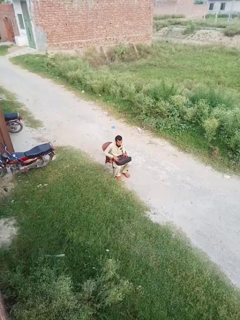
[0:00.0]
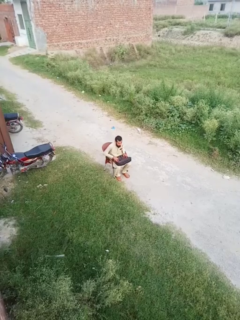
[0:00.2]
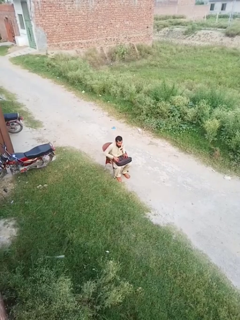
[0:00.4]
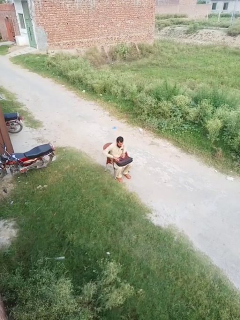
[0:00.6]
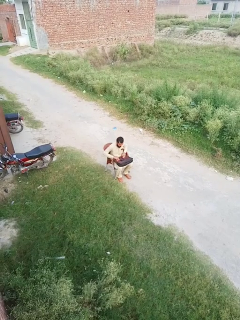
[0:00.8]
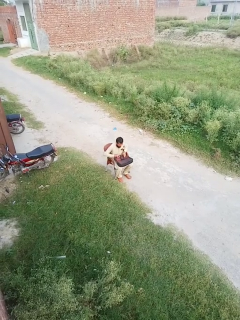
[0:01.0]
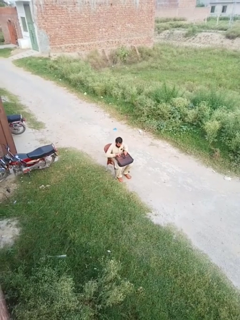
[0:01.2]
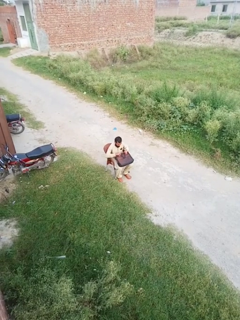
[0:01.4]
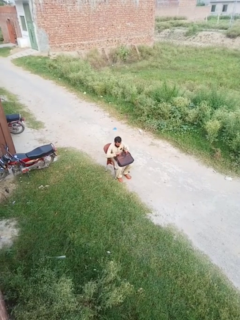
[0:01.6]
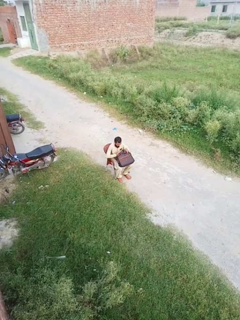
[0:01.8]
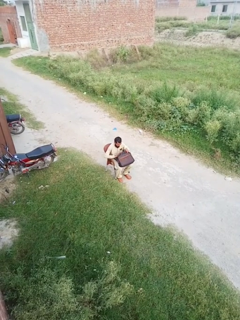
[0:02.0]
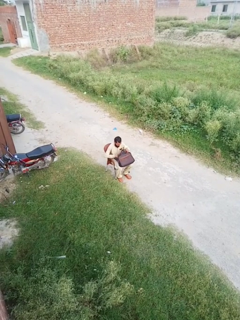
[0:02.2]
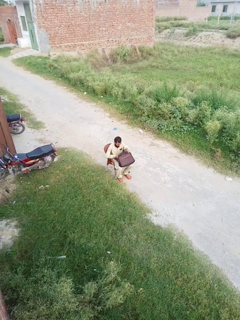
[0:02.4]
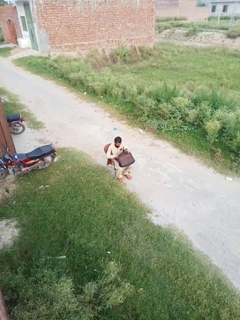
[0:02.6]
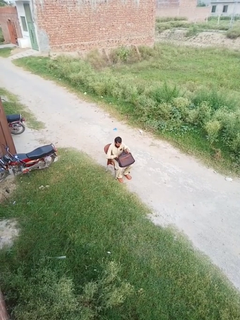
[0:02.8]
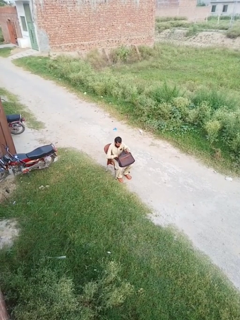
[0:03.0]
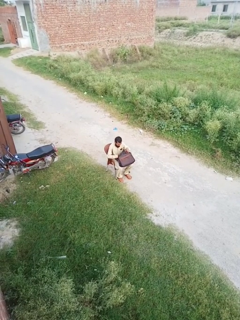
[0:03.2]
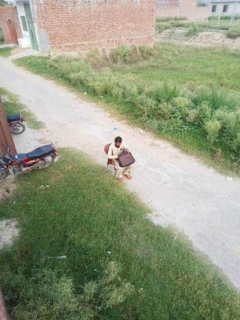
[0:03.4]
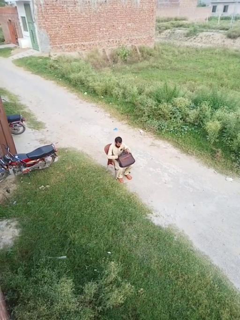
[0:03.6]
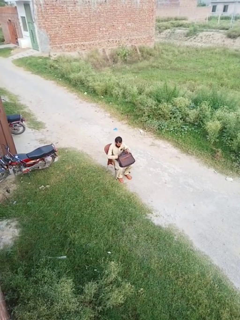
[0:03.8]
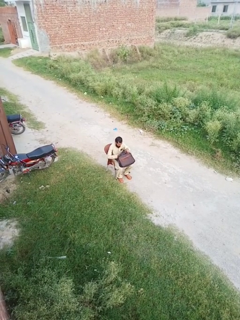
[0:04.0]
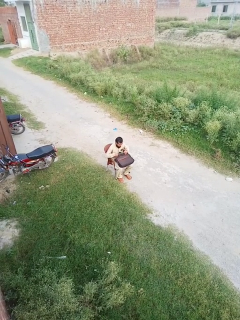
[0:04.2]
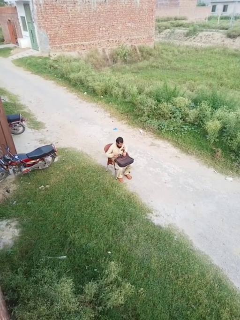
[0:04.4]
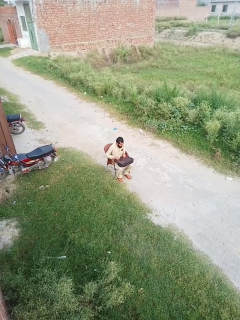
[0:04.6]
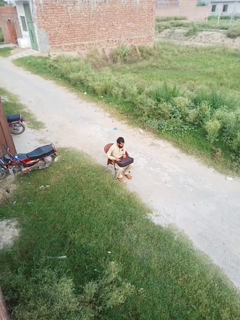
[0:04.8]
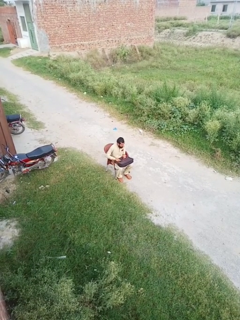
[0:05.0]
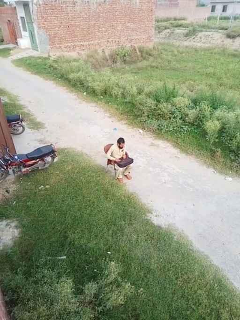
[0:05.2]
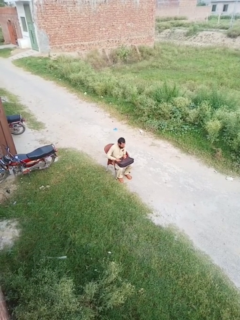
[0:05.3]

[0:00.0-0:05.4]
person searches in bag

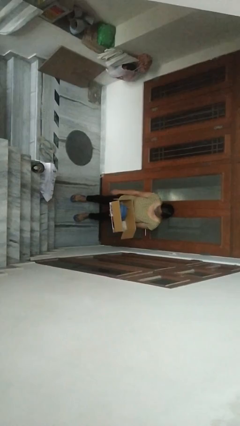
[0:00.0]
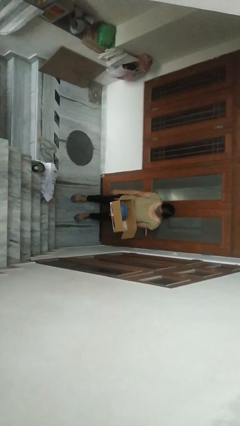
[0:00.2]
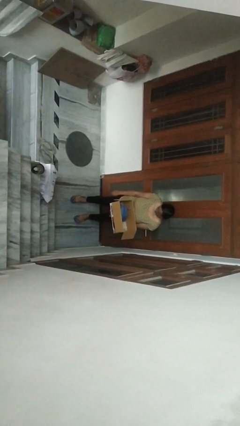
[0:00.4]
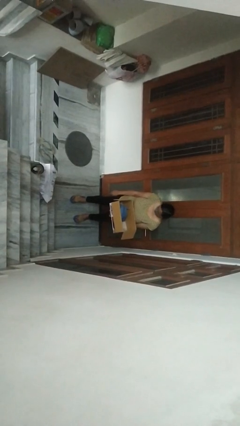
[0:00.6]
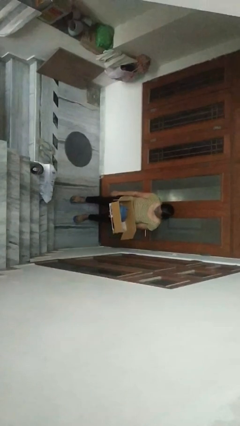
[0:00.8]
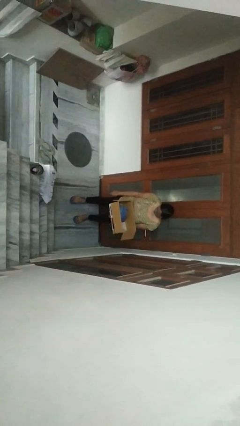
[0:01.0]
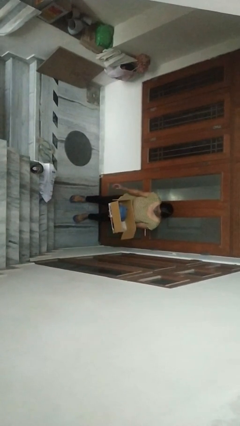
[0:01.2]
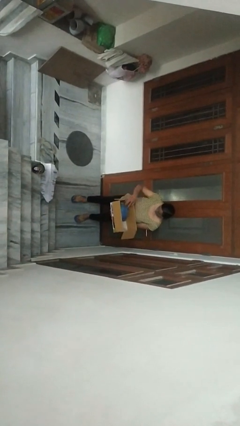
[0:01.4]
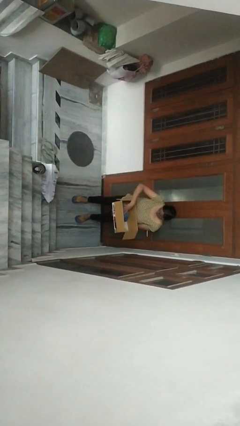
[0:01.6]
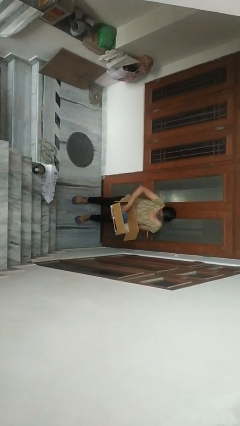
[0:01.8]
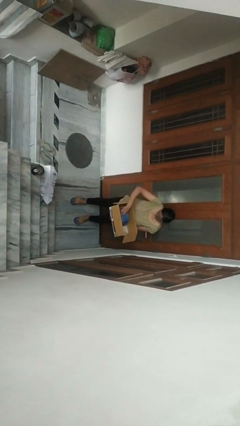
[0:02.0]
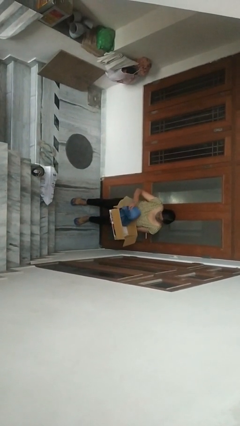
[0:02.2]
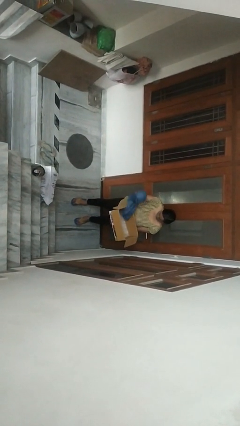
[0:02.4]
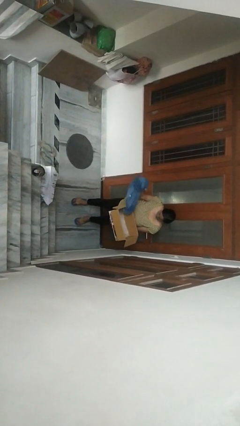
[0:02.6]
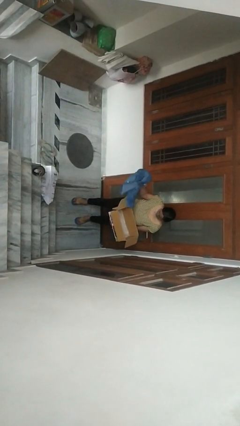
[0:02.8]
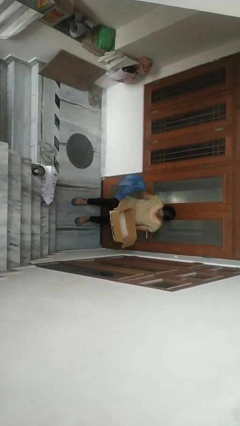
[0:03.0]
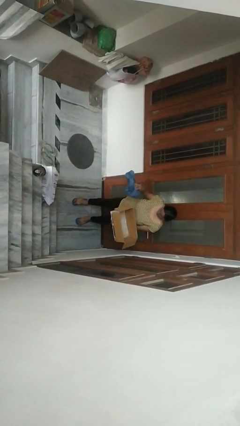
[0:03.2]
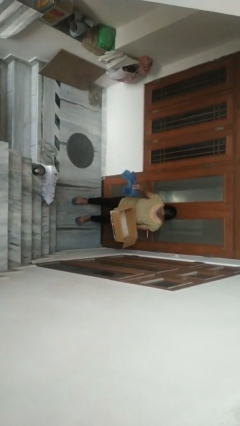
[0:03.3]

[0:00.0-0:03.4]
person takes object from box

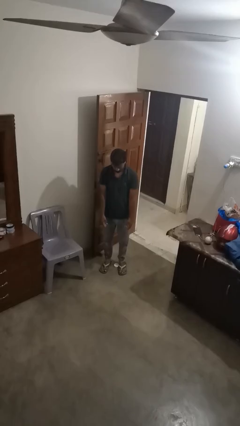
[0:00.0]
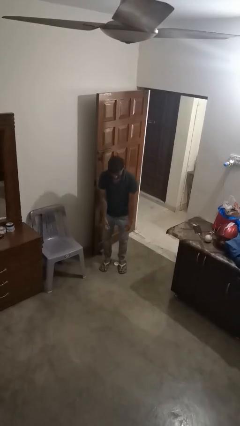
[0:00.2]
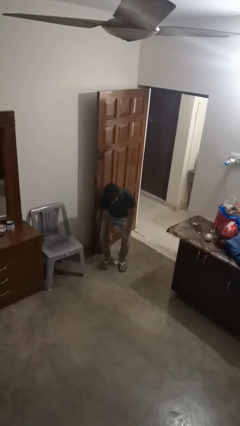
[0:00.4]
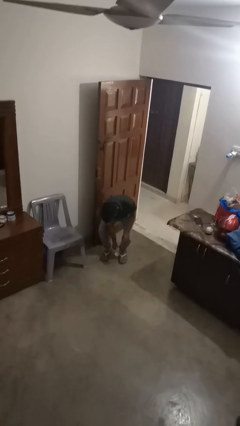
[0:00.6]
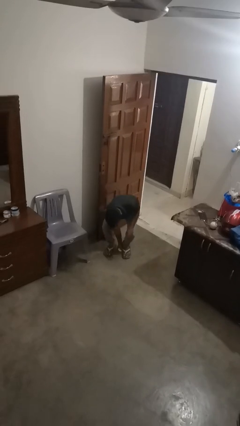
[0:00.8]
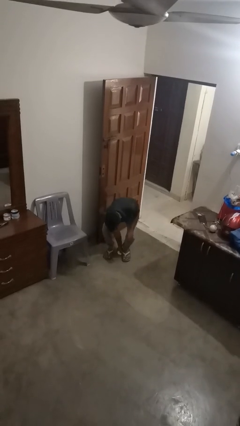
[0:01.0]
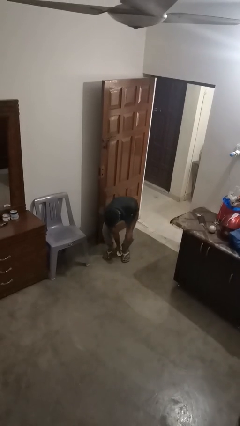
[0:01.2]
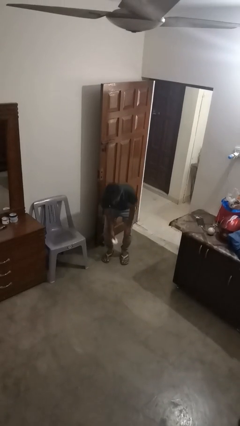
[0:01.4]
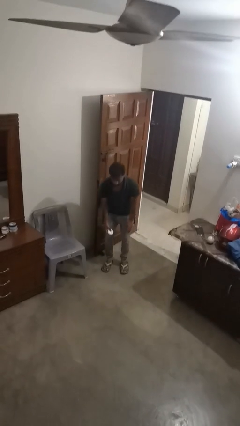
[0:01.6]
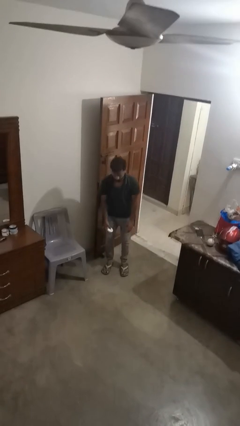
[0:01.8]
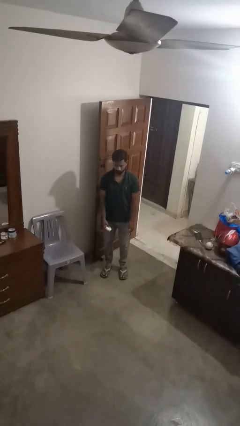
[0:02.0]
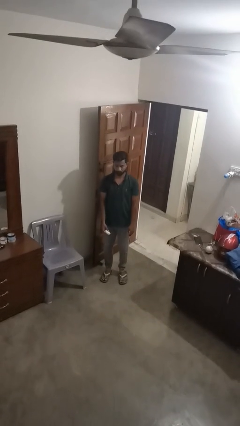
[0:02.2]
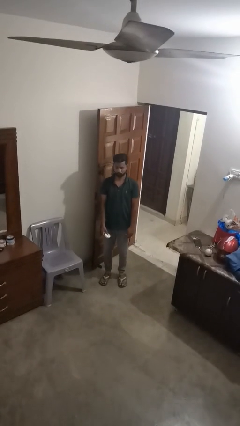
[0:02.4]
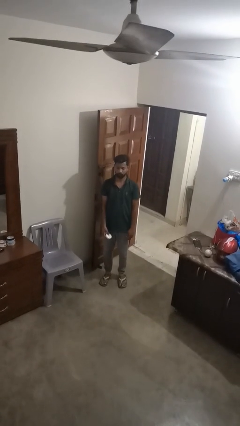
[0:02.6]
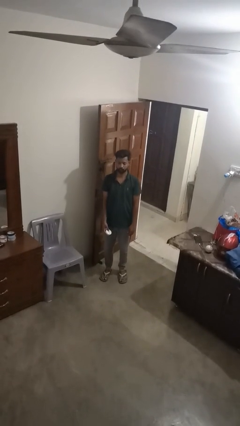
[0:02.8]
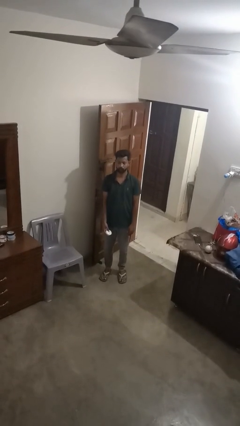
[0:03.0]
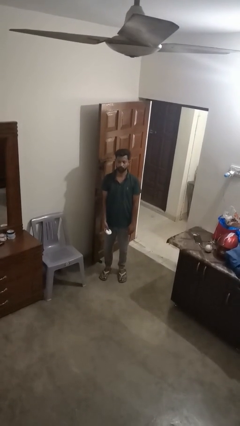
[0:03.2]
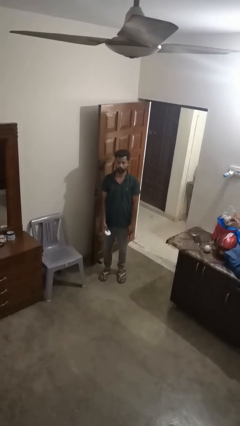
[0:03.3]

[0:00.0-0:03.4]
person picks up object from floor

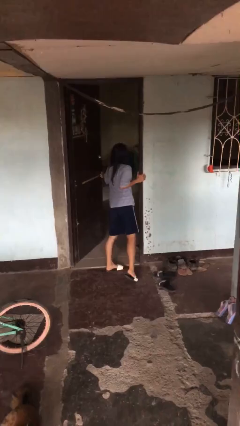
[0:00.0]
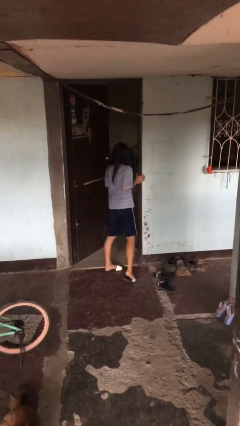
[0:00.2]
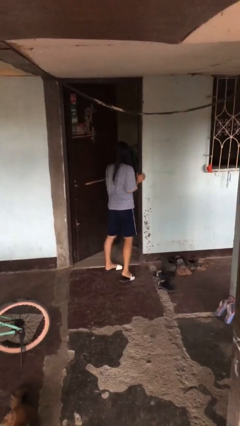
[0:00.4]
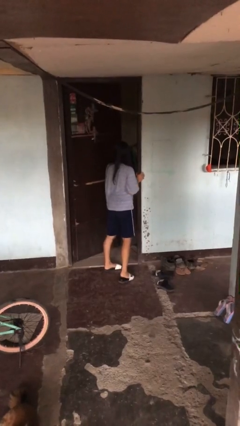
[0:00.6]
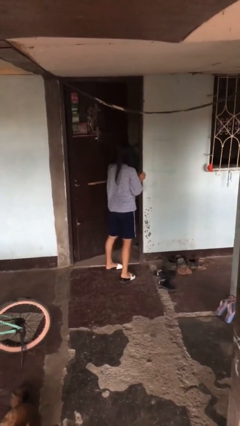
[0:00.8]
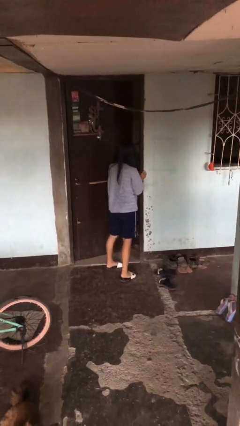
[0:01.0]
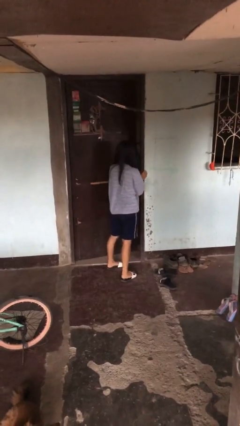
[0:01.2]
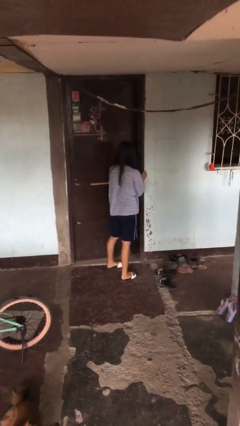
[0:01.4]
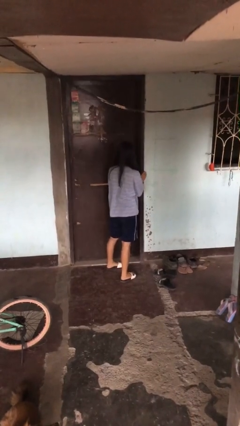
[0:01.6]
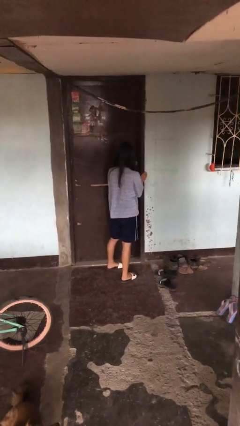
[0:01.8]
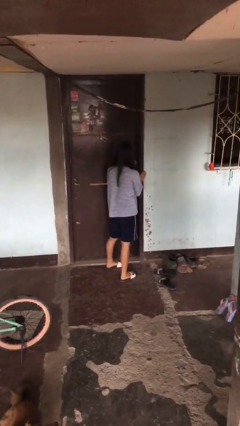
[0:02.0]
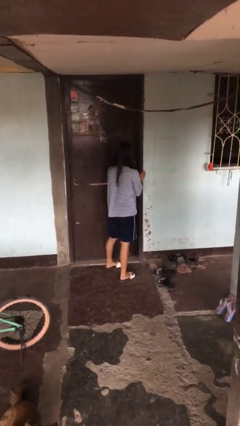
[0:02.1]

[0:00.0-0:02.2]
person closes facility door

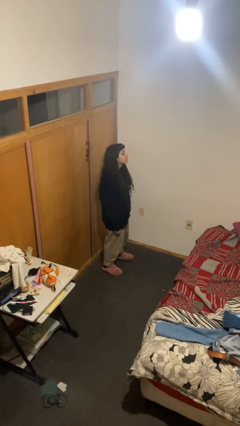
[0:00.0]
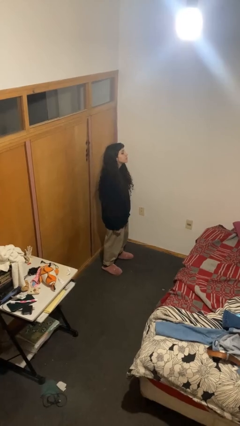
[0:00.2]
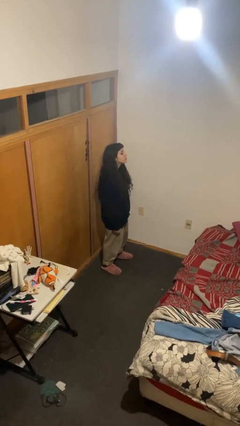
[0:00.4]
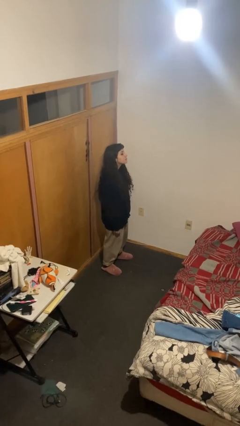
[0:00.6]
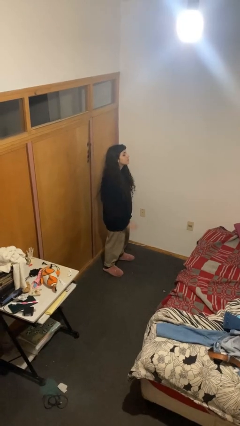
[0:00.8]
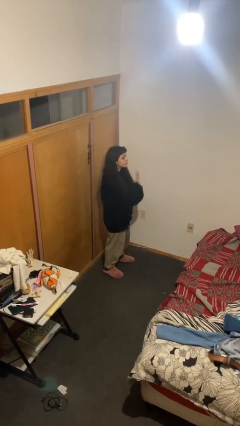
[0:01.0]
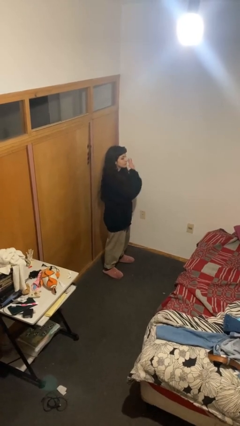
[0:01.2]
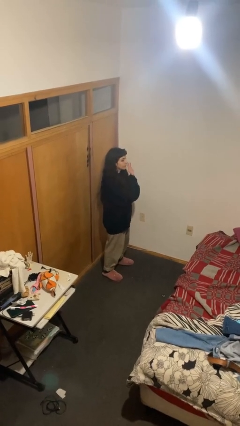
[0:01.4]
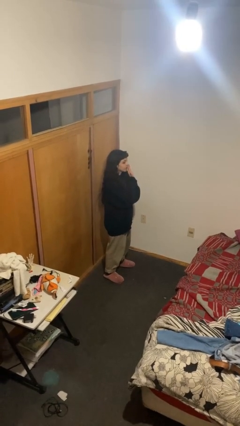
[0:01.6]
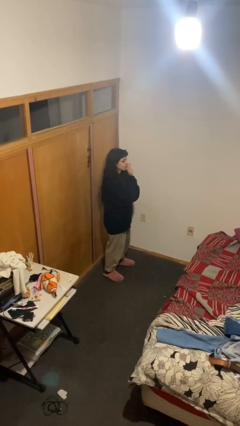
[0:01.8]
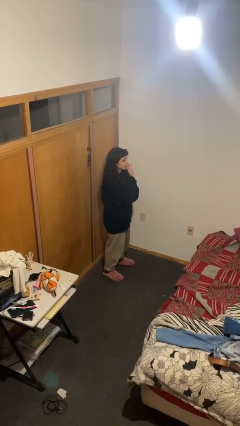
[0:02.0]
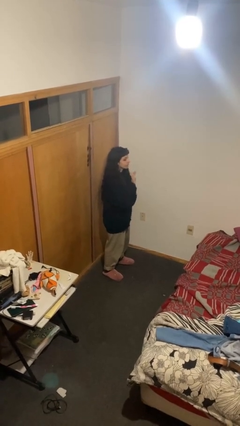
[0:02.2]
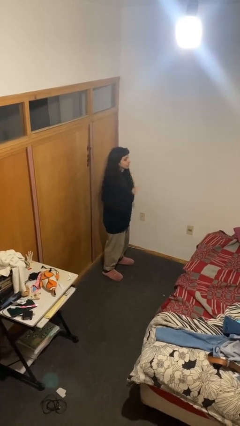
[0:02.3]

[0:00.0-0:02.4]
person gestures number five

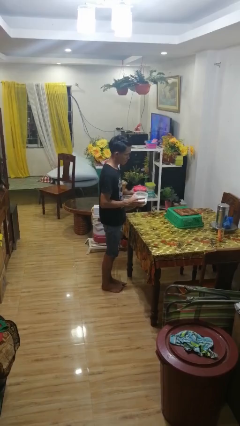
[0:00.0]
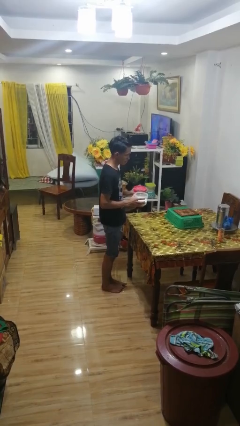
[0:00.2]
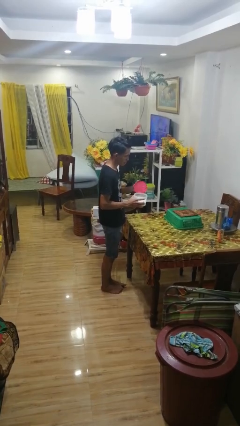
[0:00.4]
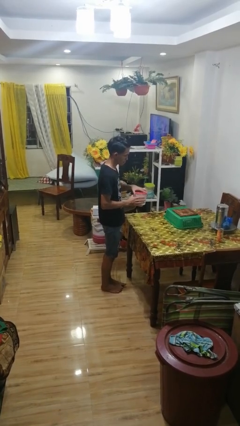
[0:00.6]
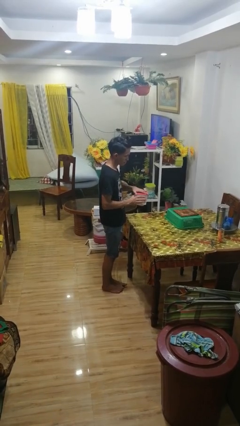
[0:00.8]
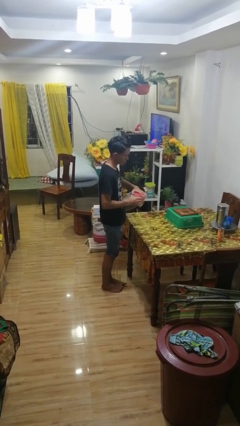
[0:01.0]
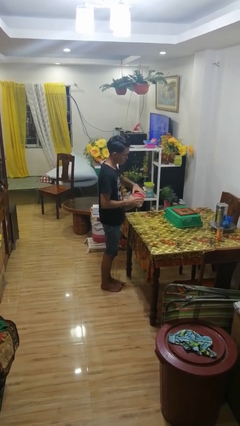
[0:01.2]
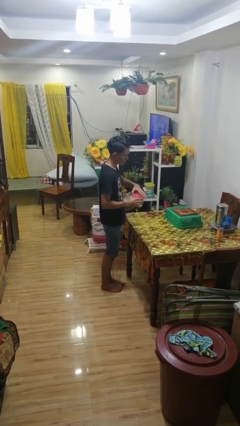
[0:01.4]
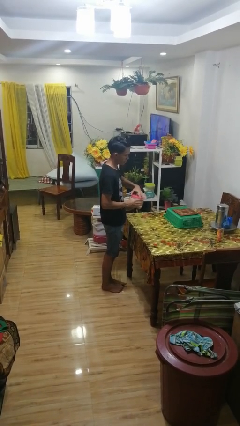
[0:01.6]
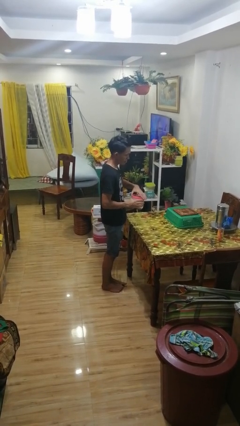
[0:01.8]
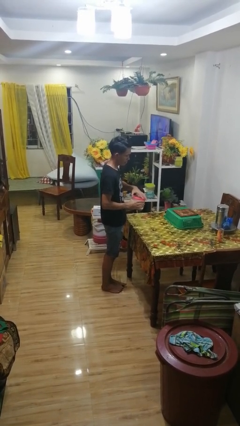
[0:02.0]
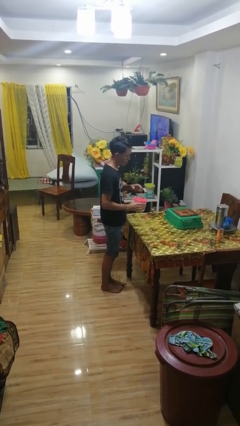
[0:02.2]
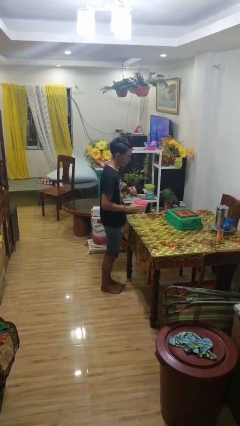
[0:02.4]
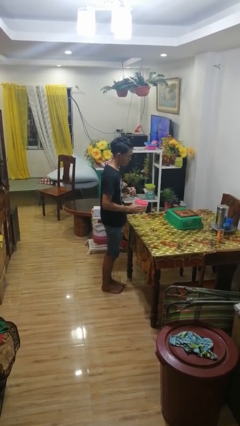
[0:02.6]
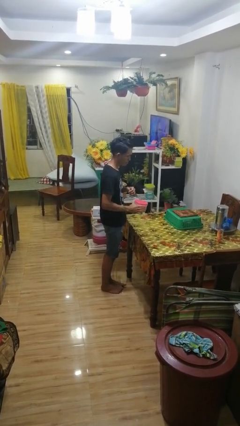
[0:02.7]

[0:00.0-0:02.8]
person closes jar
